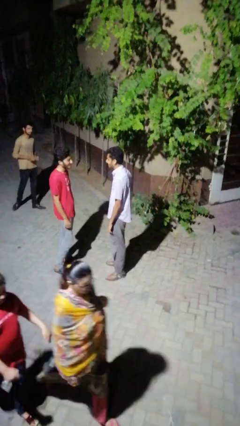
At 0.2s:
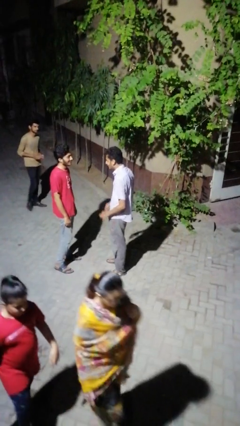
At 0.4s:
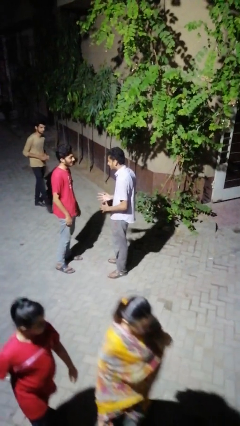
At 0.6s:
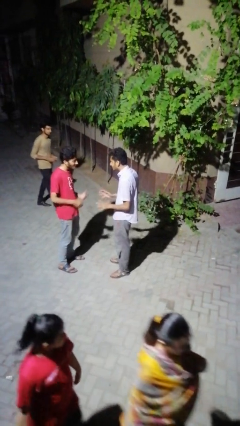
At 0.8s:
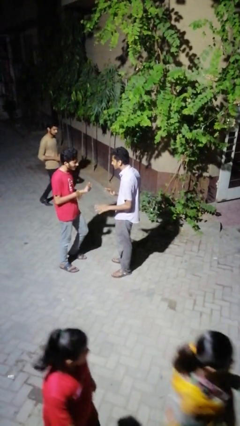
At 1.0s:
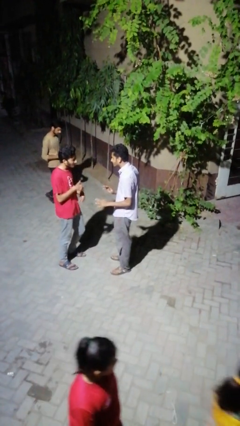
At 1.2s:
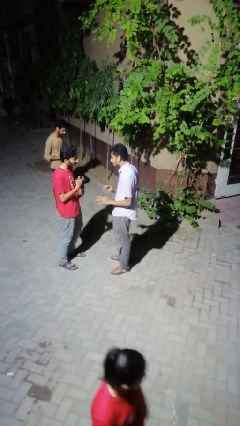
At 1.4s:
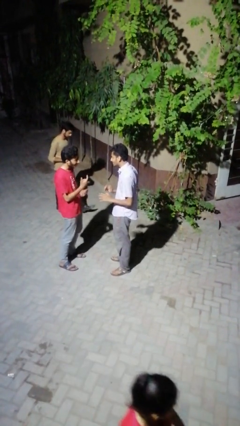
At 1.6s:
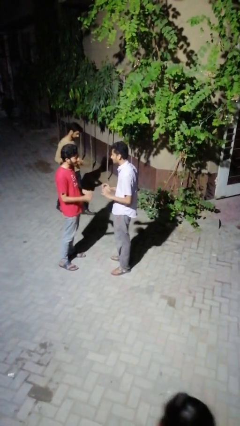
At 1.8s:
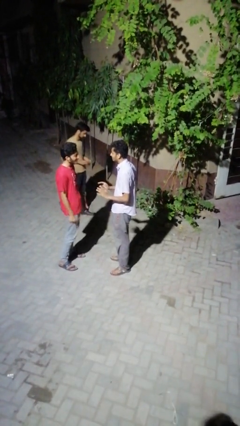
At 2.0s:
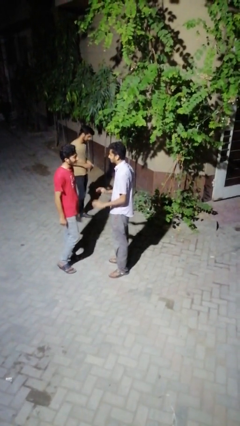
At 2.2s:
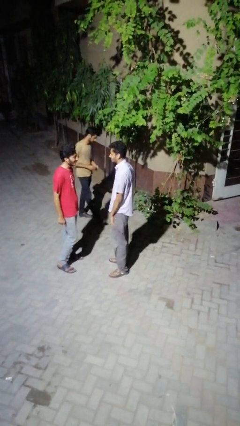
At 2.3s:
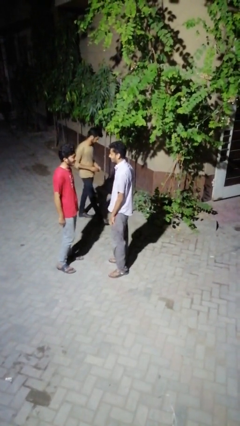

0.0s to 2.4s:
person talks to person

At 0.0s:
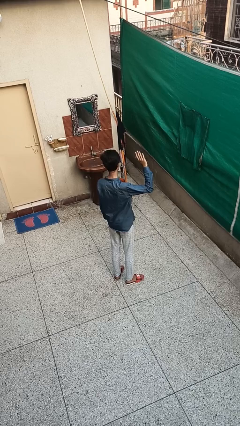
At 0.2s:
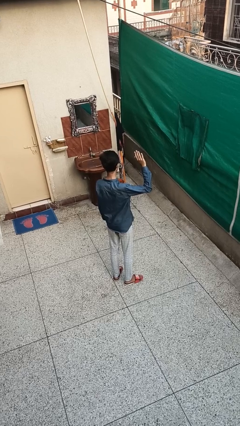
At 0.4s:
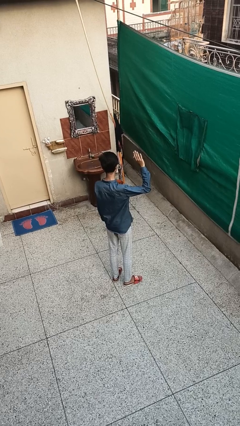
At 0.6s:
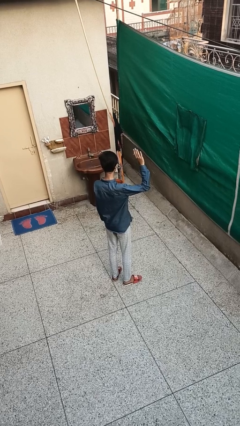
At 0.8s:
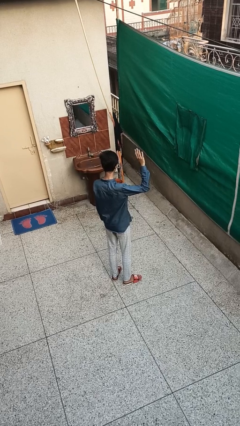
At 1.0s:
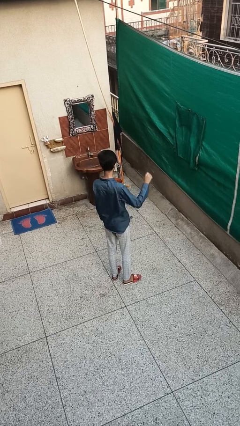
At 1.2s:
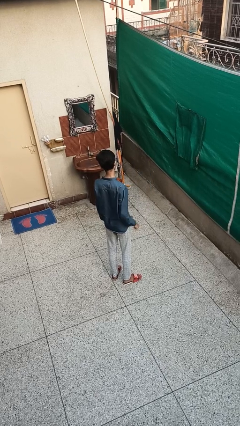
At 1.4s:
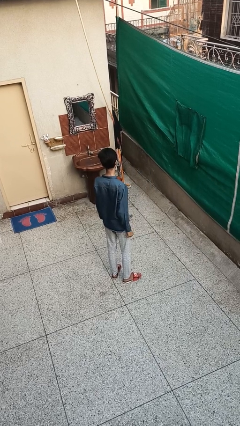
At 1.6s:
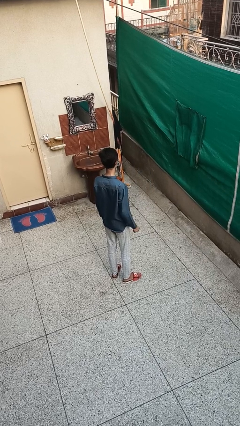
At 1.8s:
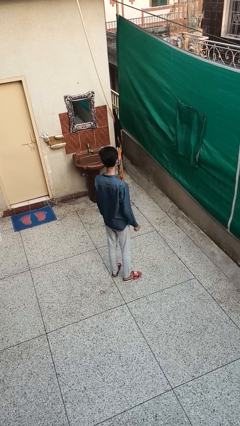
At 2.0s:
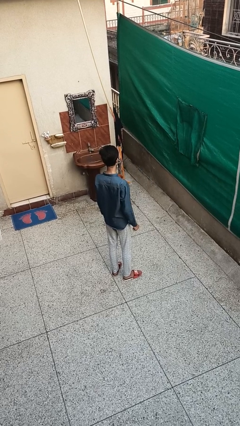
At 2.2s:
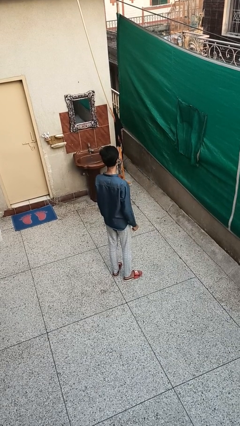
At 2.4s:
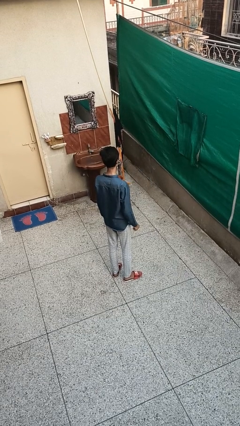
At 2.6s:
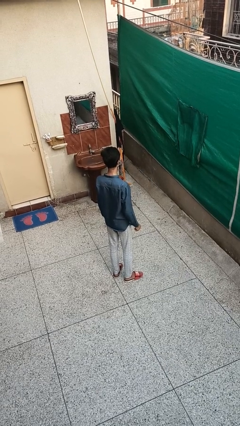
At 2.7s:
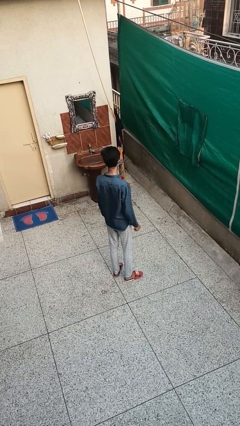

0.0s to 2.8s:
person gestures lower hand

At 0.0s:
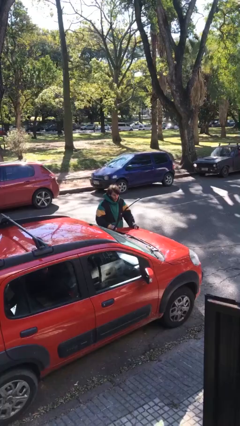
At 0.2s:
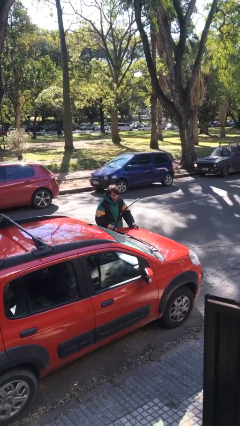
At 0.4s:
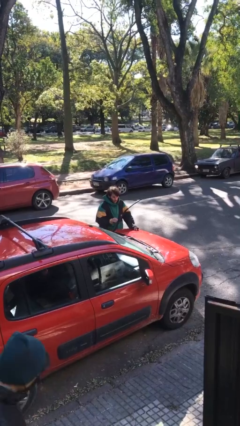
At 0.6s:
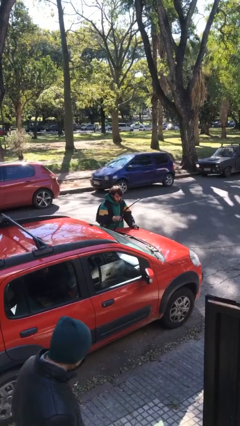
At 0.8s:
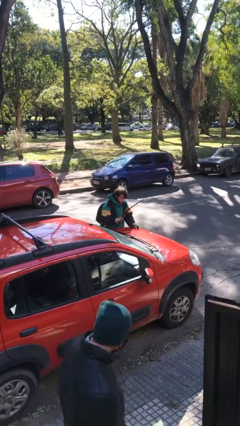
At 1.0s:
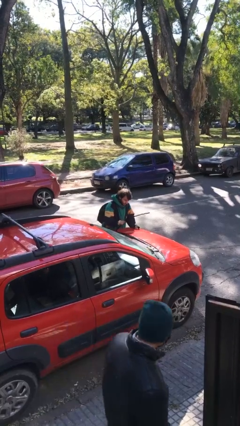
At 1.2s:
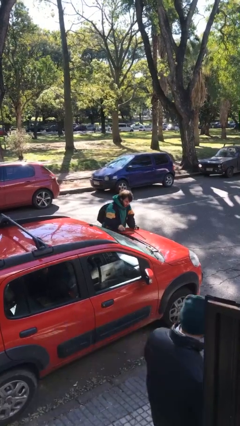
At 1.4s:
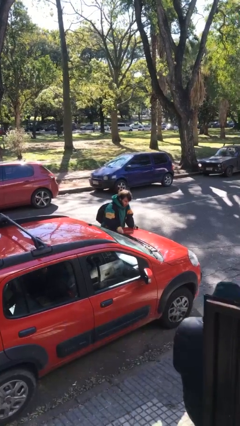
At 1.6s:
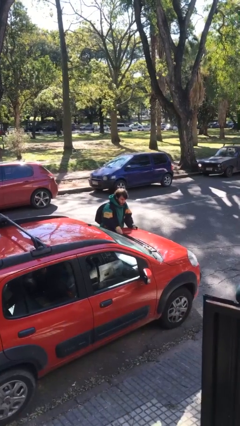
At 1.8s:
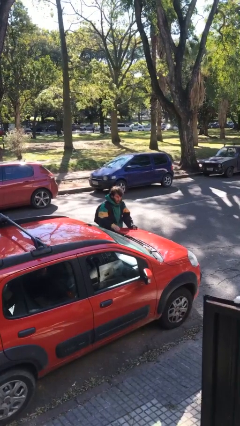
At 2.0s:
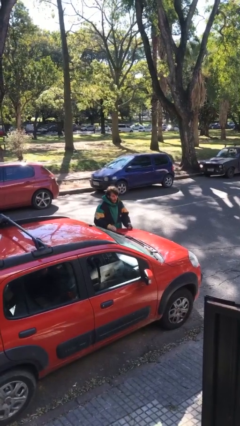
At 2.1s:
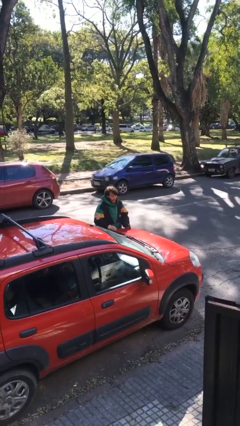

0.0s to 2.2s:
person flips down car wipers

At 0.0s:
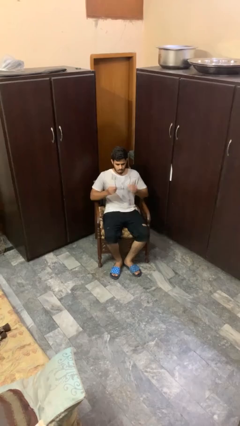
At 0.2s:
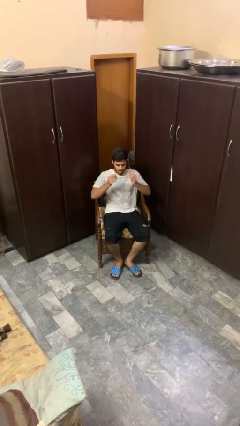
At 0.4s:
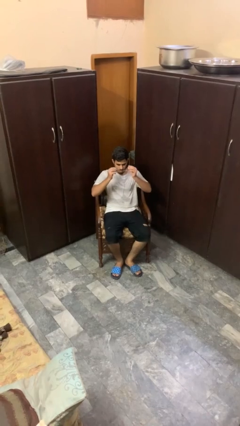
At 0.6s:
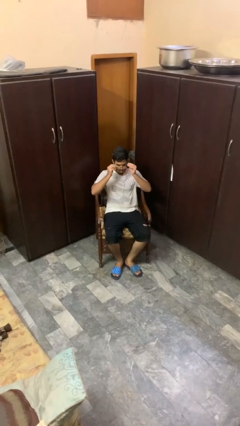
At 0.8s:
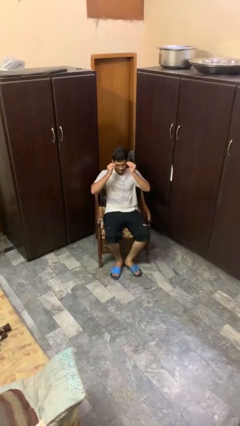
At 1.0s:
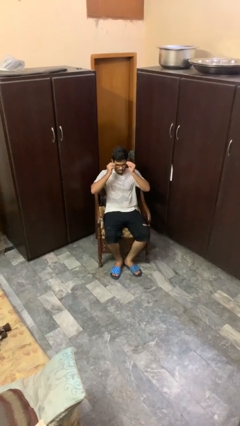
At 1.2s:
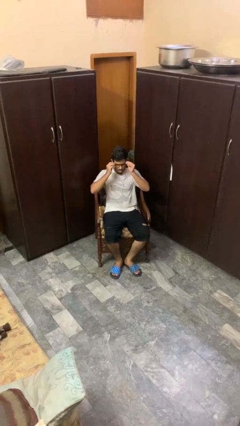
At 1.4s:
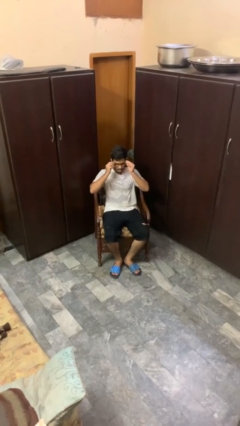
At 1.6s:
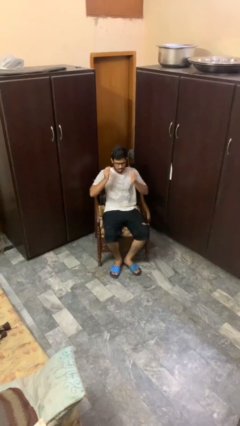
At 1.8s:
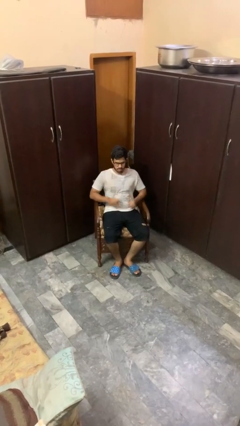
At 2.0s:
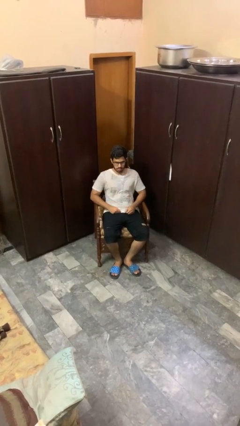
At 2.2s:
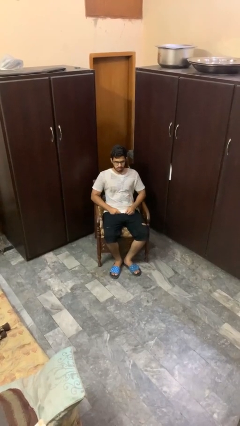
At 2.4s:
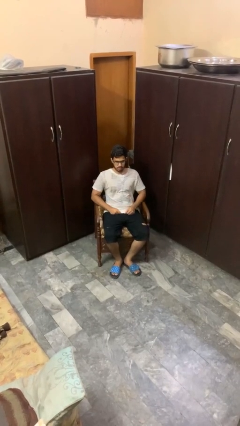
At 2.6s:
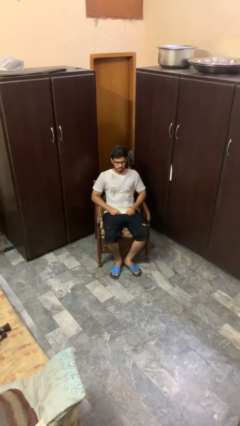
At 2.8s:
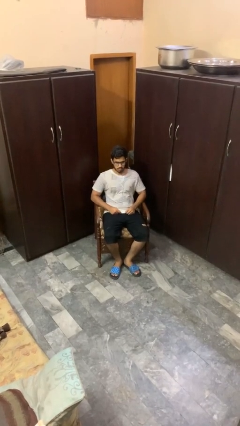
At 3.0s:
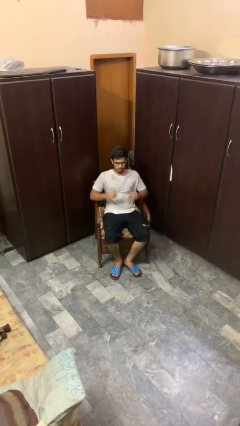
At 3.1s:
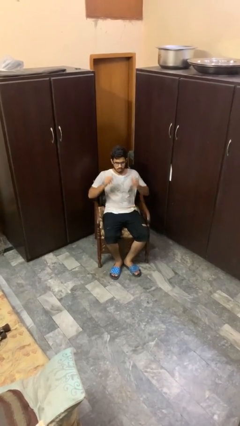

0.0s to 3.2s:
person puts on glasses

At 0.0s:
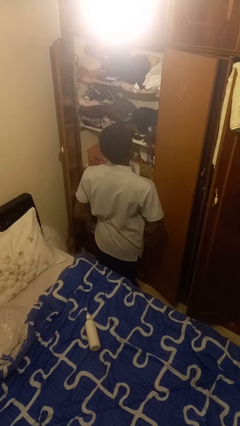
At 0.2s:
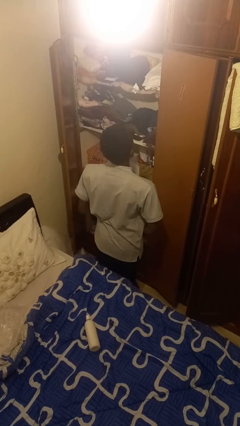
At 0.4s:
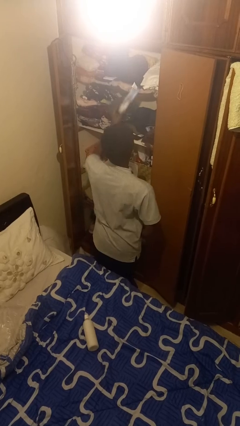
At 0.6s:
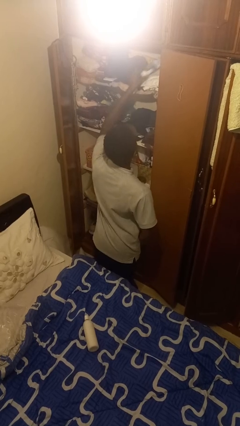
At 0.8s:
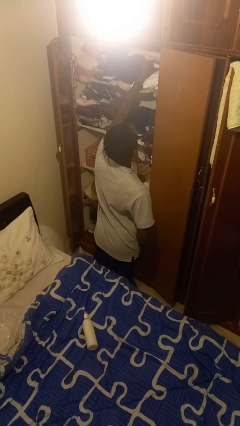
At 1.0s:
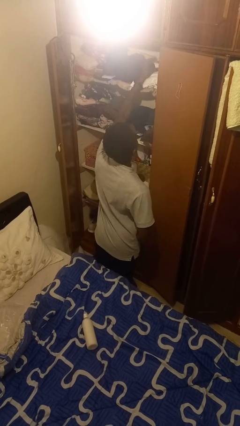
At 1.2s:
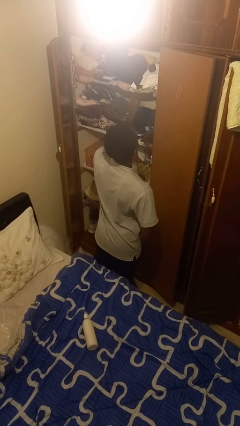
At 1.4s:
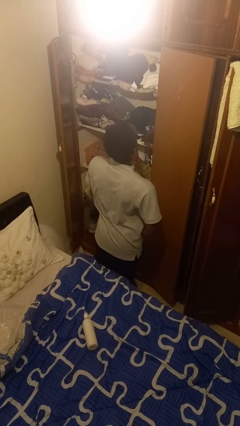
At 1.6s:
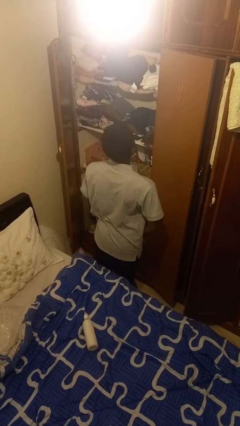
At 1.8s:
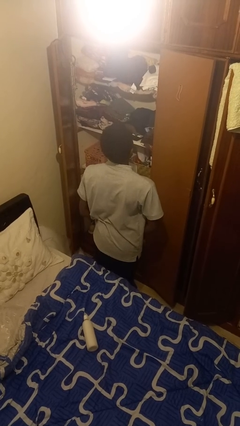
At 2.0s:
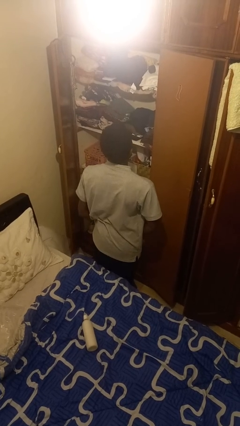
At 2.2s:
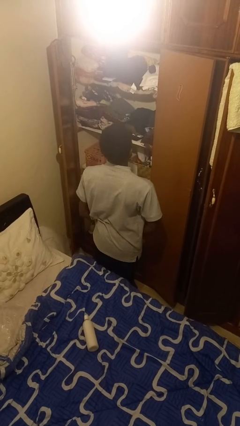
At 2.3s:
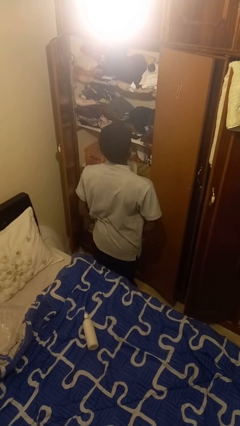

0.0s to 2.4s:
person puts down object on shelf

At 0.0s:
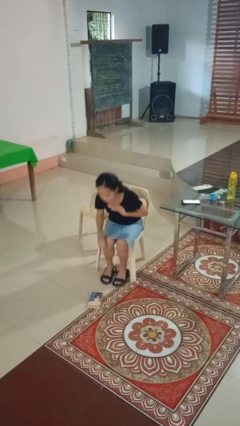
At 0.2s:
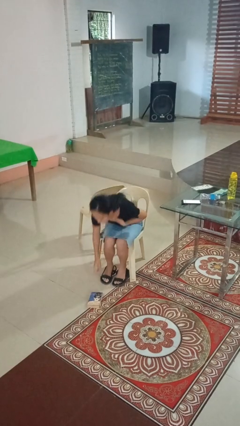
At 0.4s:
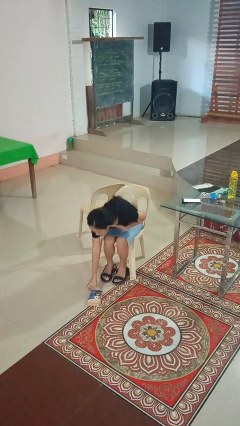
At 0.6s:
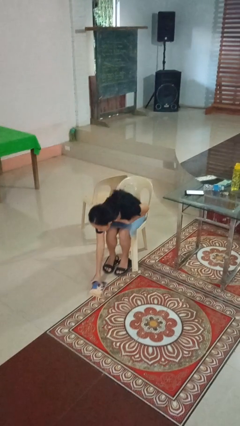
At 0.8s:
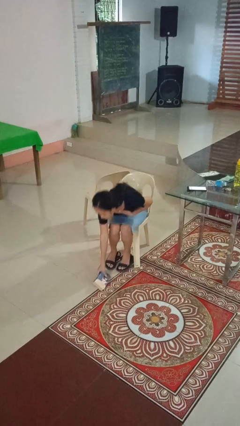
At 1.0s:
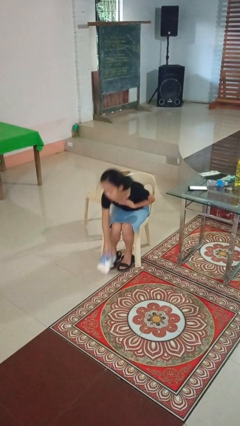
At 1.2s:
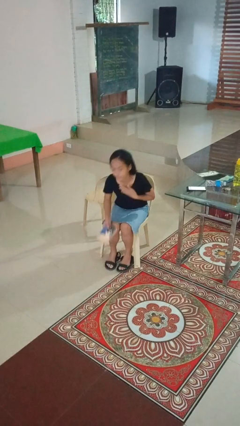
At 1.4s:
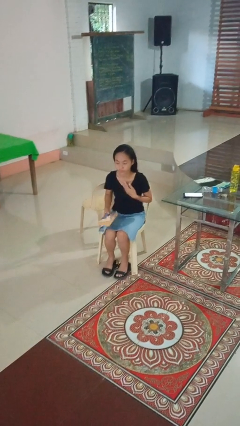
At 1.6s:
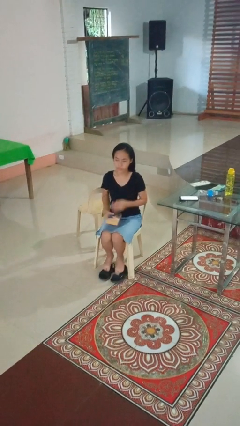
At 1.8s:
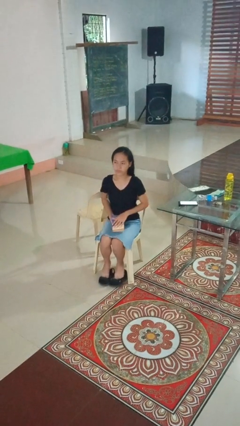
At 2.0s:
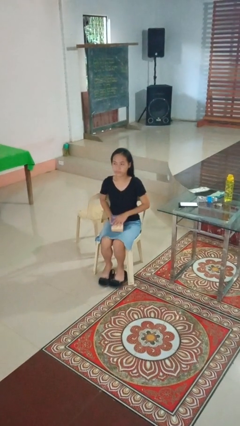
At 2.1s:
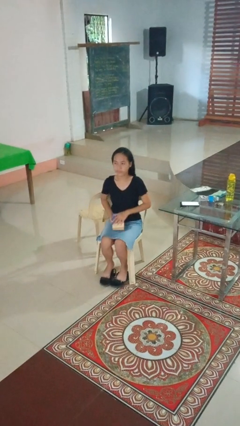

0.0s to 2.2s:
person picks up object from floor

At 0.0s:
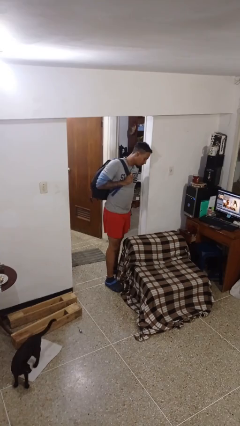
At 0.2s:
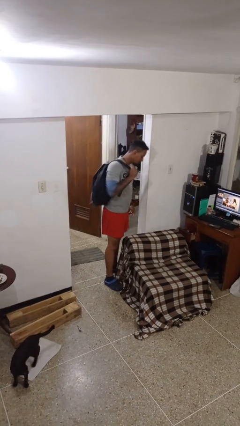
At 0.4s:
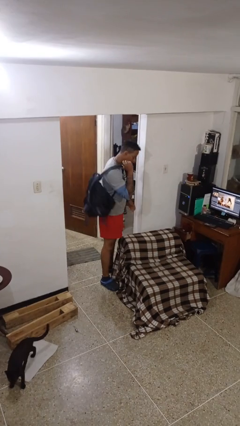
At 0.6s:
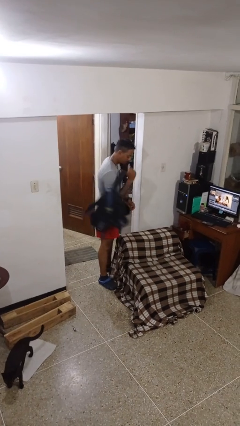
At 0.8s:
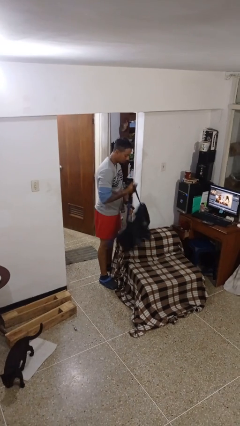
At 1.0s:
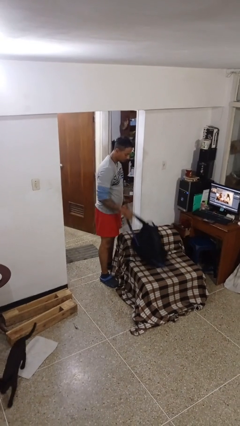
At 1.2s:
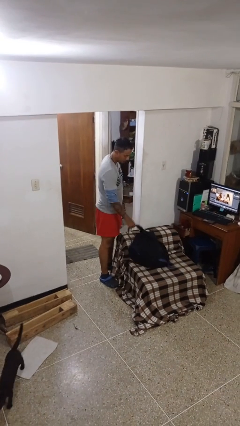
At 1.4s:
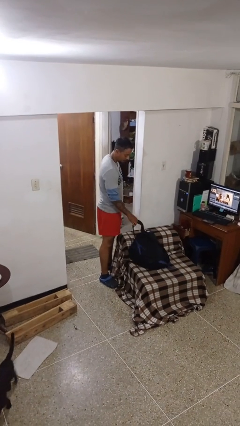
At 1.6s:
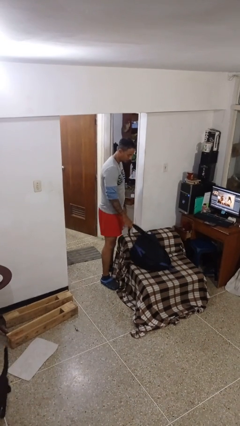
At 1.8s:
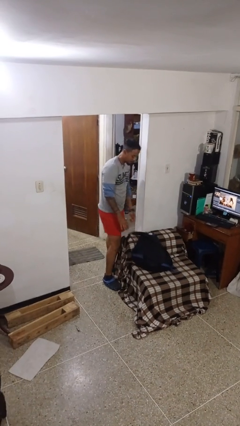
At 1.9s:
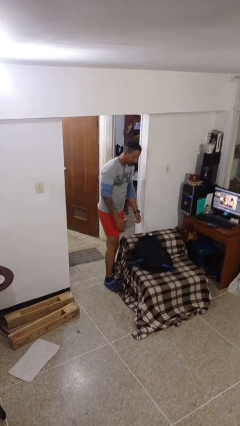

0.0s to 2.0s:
person puts down object on couch

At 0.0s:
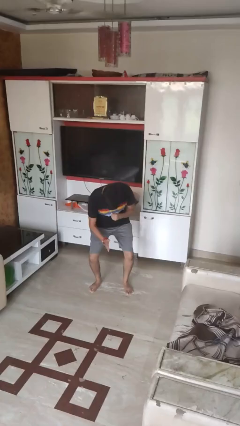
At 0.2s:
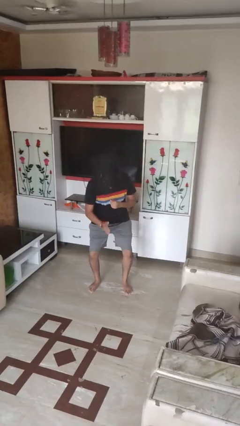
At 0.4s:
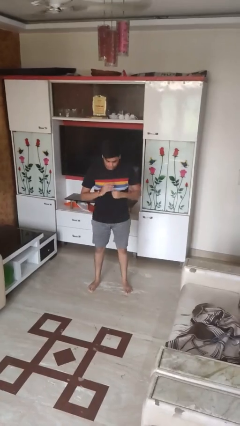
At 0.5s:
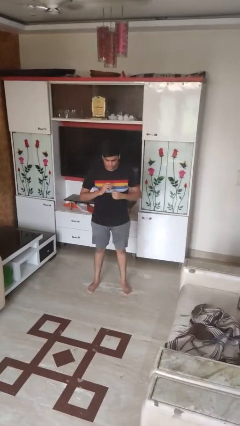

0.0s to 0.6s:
person karate chop
